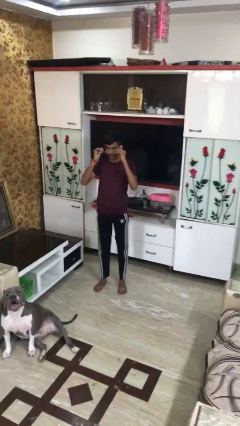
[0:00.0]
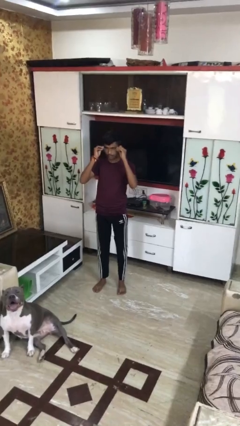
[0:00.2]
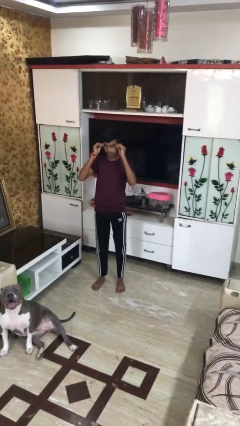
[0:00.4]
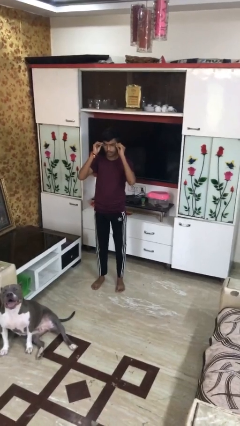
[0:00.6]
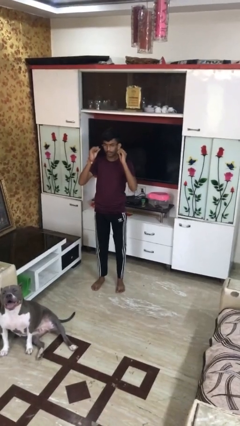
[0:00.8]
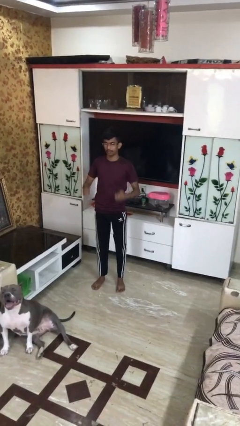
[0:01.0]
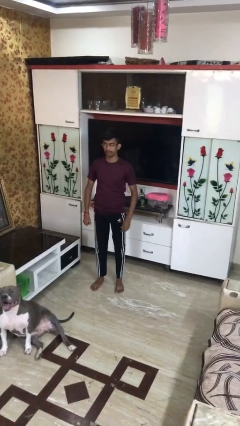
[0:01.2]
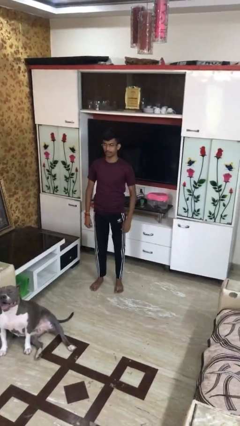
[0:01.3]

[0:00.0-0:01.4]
person puts on glasses

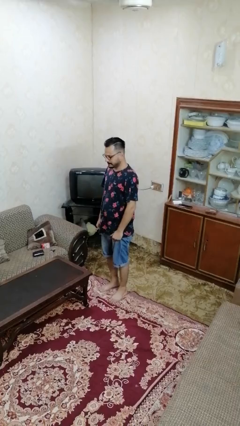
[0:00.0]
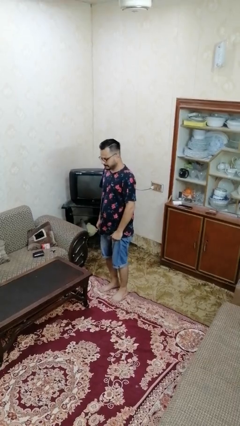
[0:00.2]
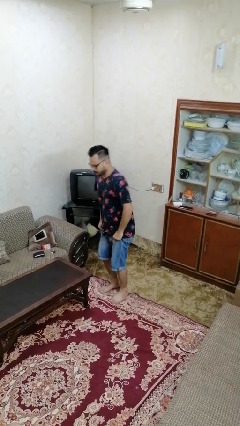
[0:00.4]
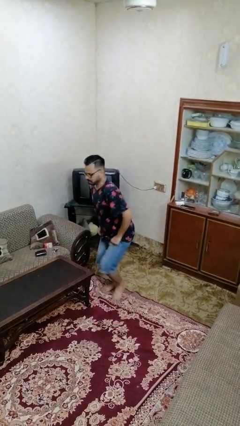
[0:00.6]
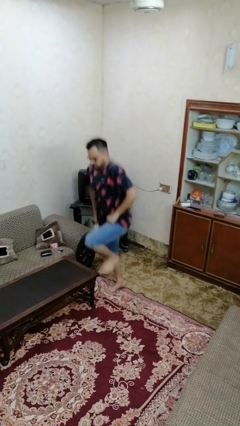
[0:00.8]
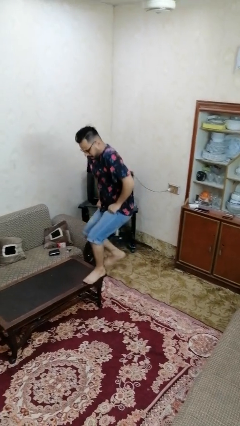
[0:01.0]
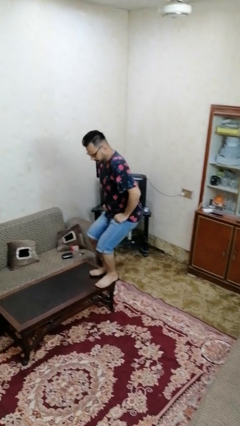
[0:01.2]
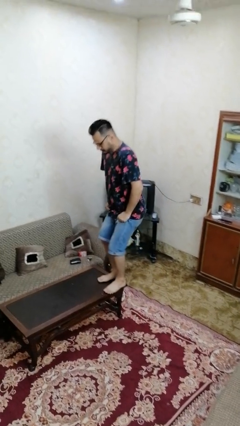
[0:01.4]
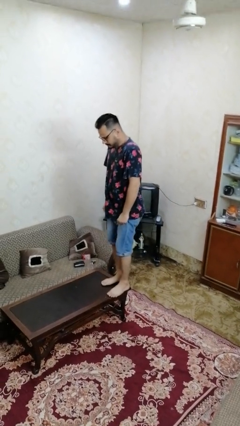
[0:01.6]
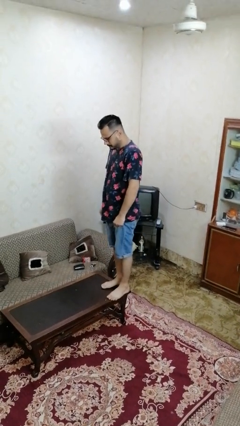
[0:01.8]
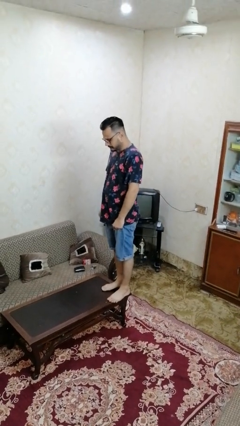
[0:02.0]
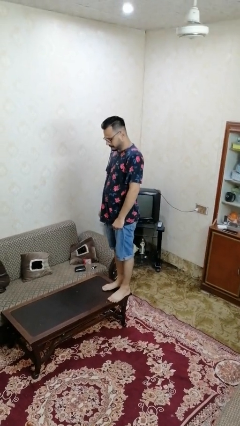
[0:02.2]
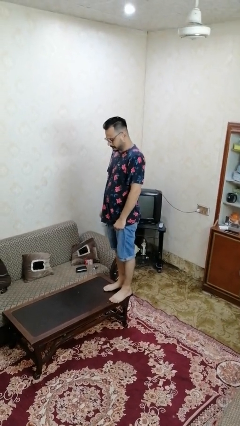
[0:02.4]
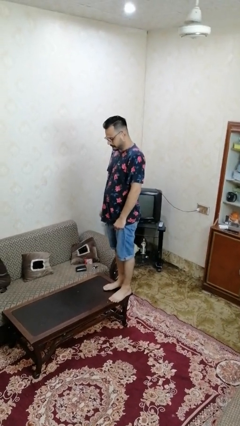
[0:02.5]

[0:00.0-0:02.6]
person climbs on table

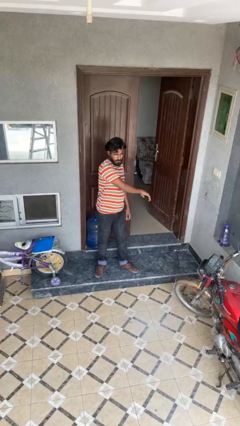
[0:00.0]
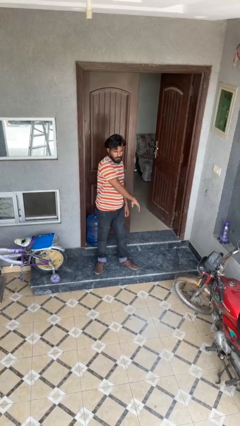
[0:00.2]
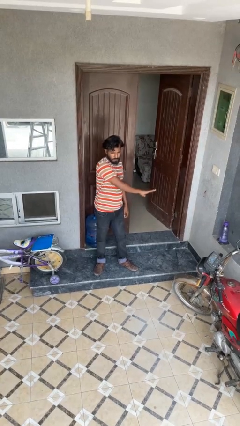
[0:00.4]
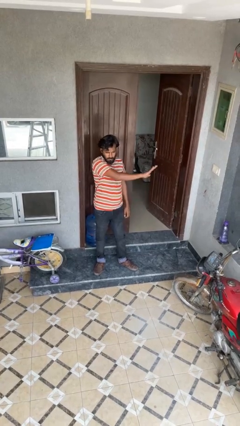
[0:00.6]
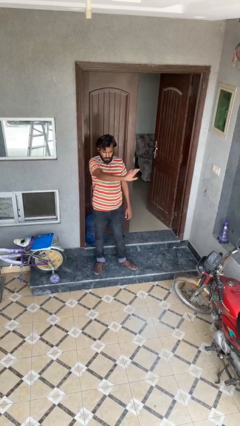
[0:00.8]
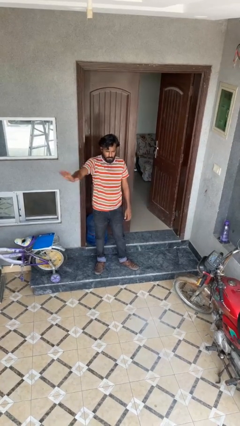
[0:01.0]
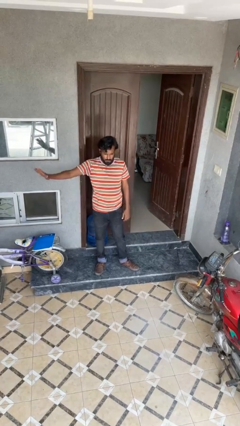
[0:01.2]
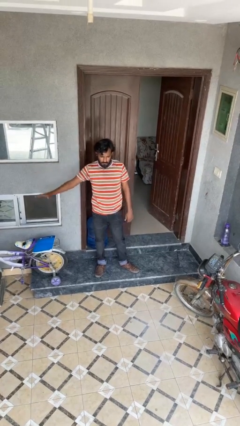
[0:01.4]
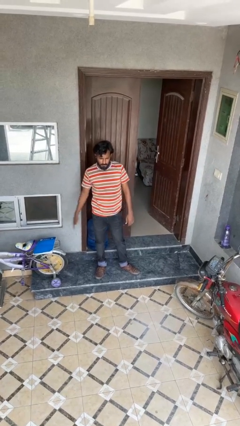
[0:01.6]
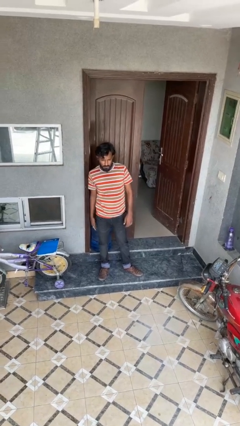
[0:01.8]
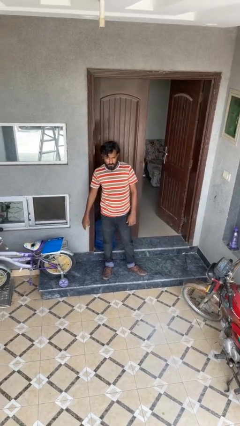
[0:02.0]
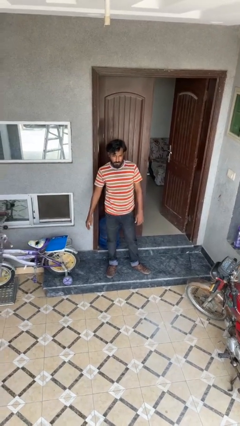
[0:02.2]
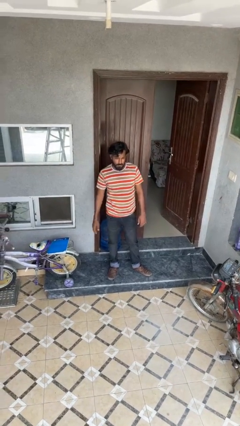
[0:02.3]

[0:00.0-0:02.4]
person gestures swipe right

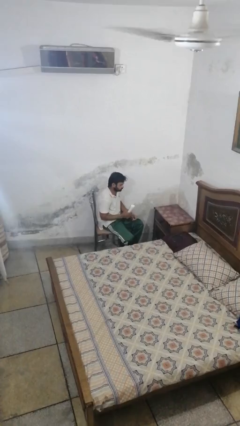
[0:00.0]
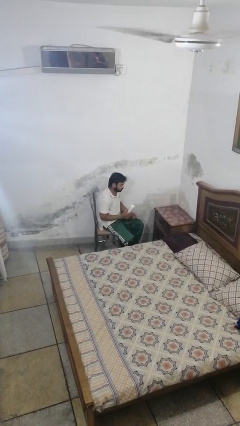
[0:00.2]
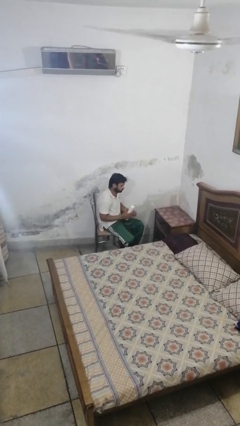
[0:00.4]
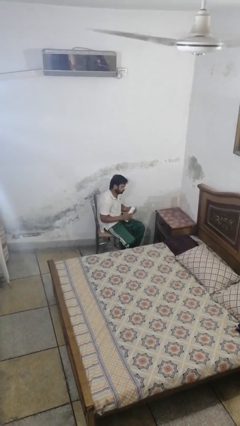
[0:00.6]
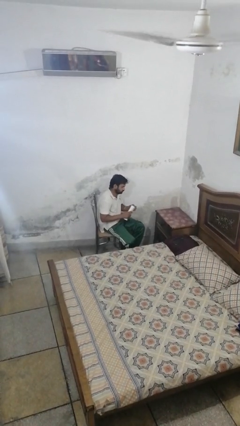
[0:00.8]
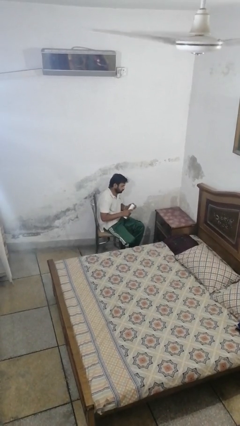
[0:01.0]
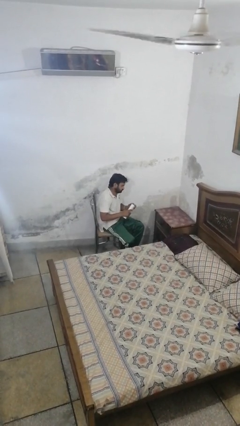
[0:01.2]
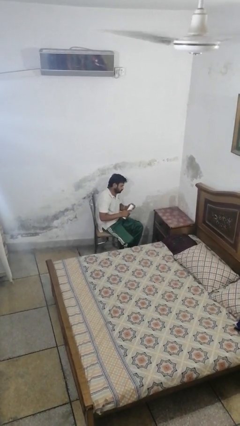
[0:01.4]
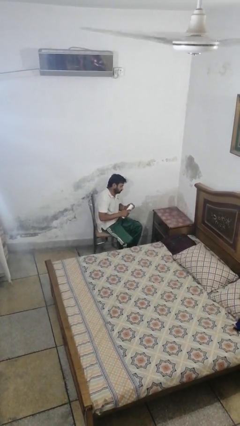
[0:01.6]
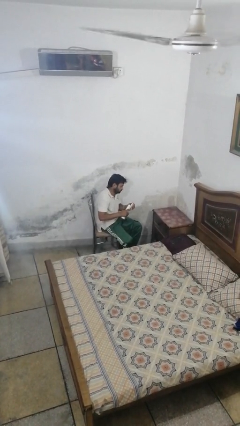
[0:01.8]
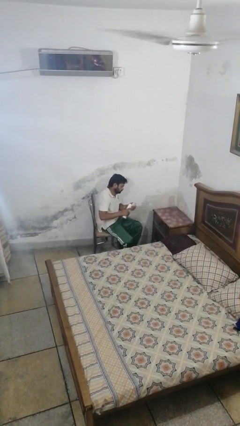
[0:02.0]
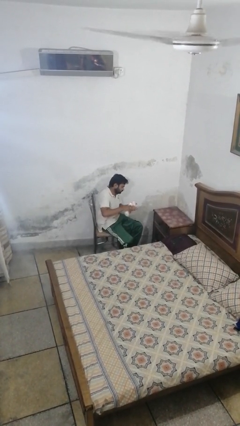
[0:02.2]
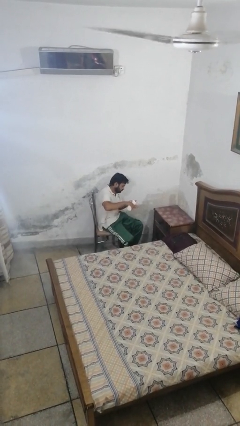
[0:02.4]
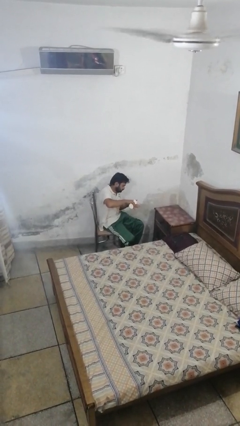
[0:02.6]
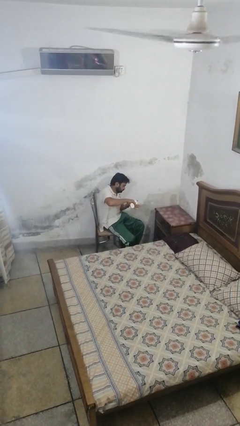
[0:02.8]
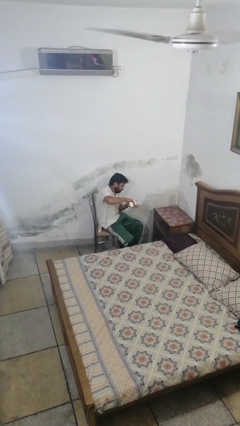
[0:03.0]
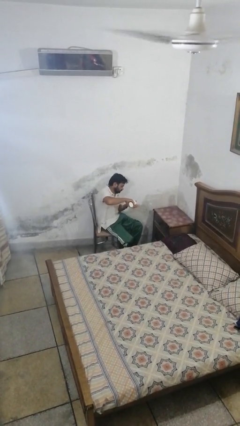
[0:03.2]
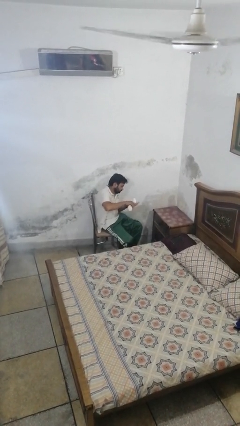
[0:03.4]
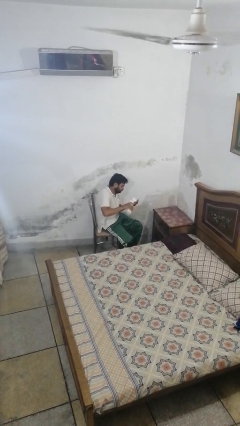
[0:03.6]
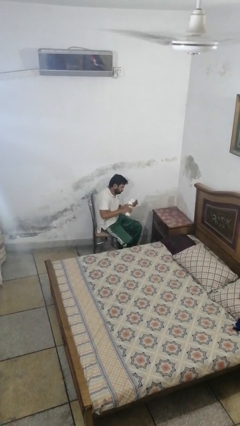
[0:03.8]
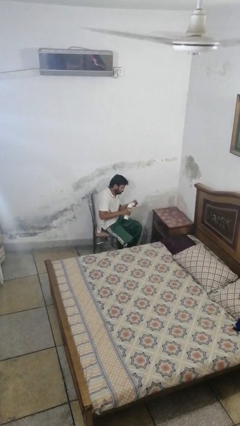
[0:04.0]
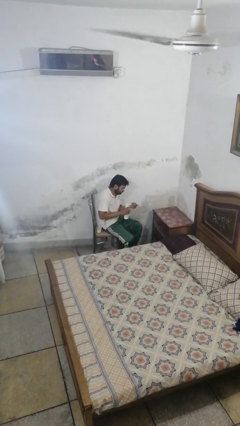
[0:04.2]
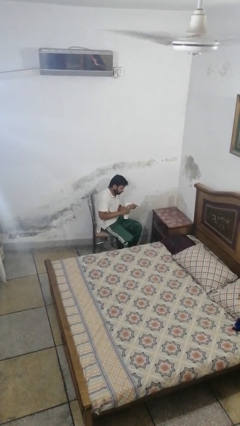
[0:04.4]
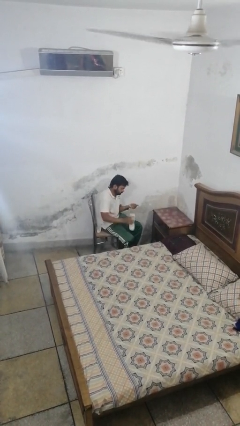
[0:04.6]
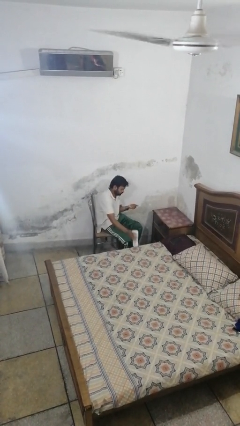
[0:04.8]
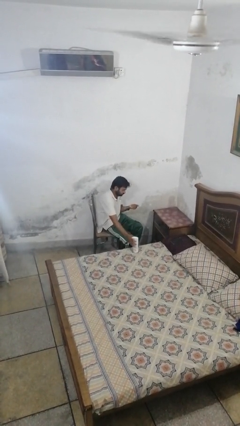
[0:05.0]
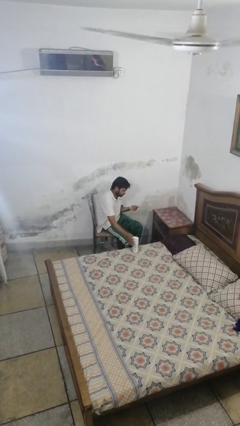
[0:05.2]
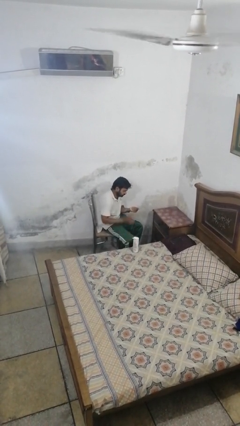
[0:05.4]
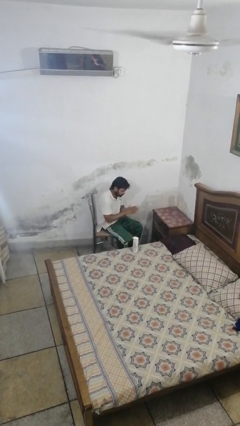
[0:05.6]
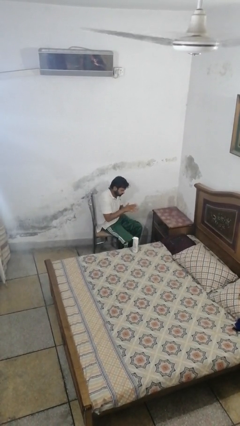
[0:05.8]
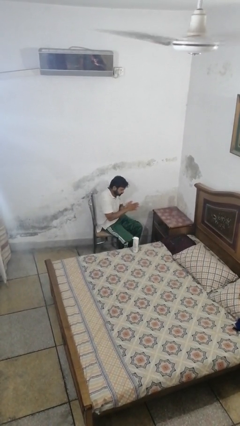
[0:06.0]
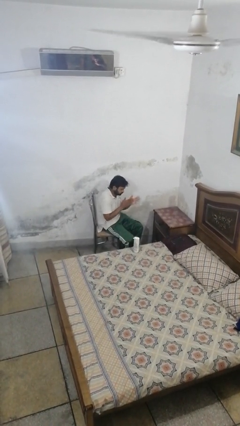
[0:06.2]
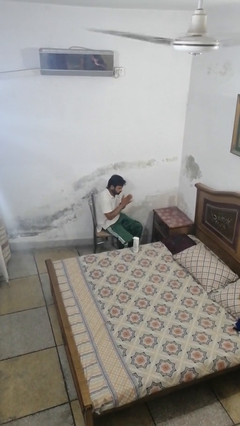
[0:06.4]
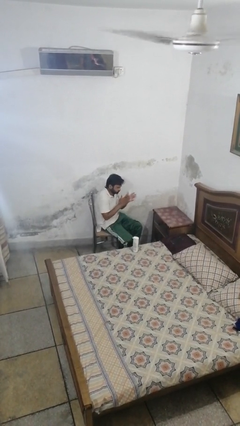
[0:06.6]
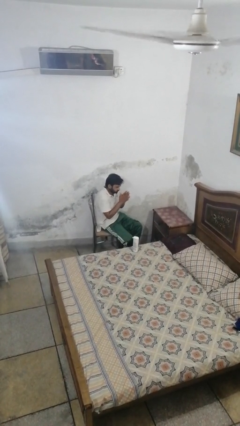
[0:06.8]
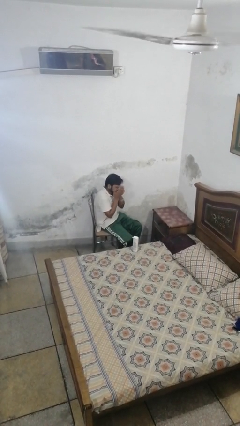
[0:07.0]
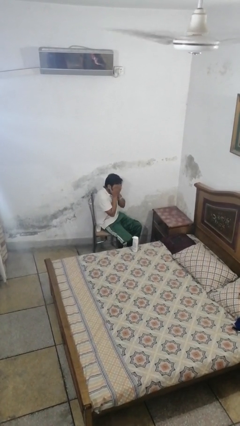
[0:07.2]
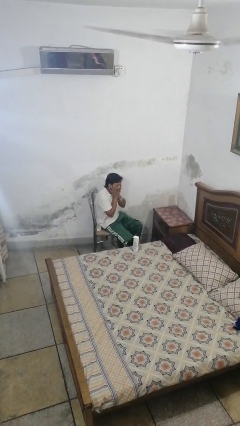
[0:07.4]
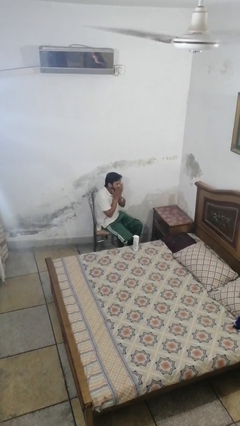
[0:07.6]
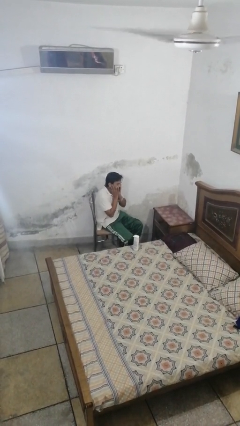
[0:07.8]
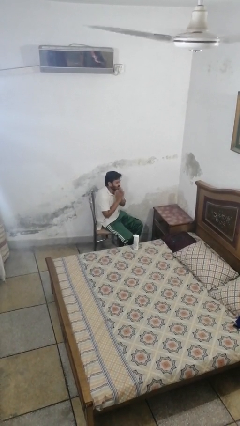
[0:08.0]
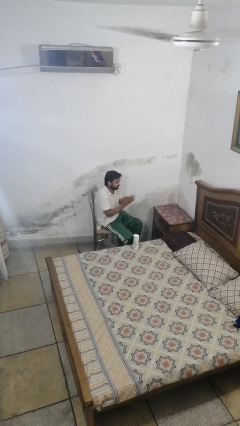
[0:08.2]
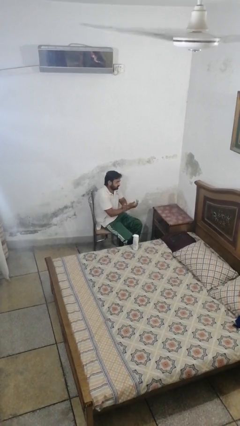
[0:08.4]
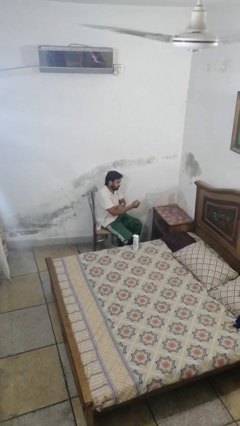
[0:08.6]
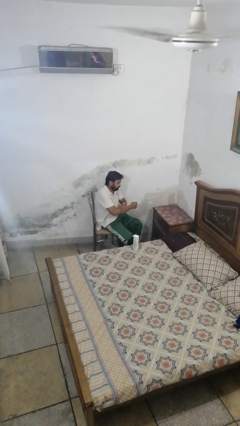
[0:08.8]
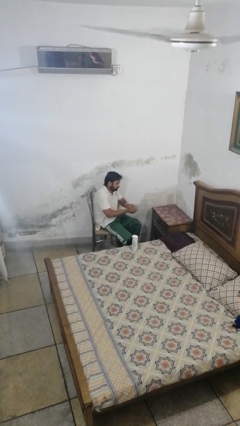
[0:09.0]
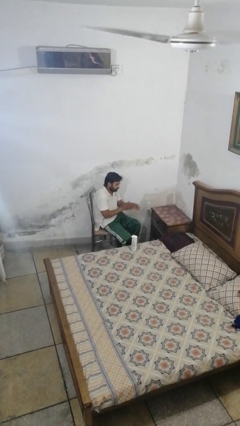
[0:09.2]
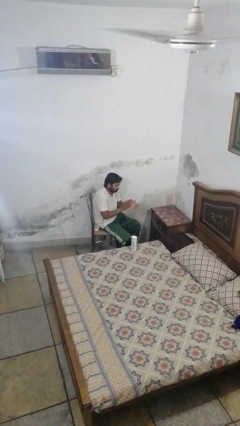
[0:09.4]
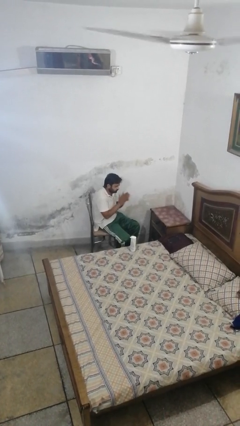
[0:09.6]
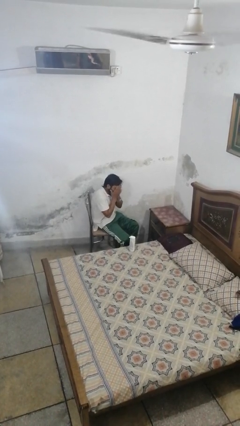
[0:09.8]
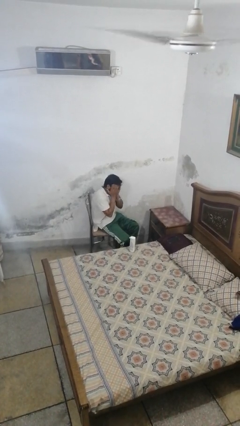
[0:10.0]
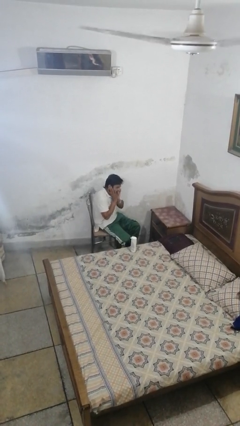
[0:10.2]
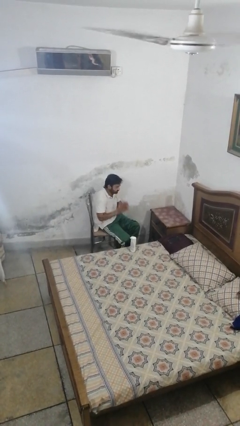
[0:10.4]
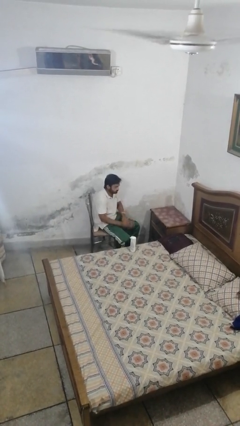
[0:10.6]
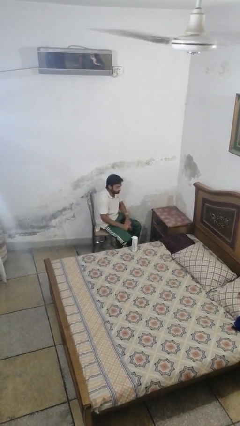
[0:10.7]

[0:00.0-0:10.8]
person applies facial moisturizer

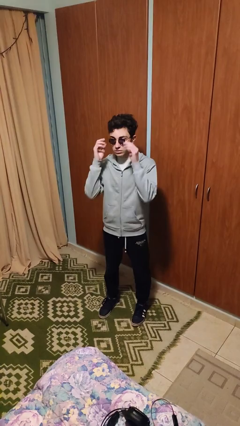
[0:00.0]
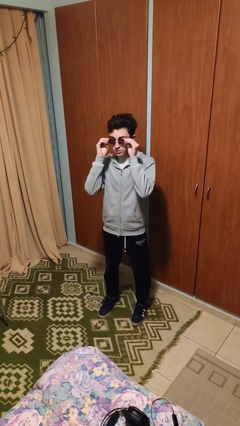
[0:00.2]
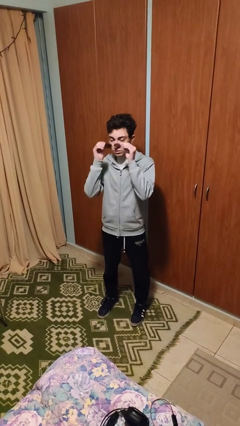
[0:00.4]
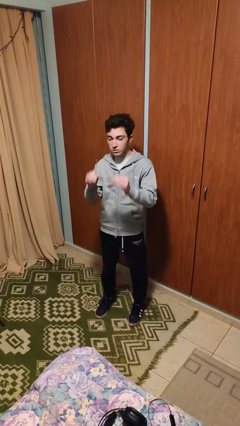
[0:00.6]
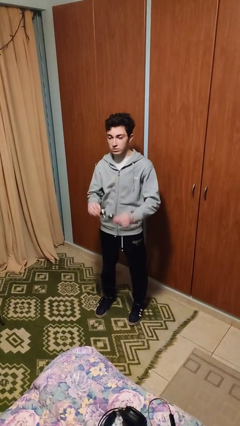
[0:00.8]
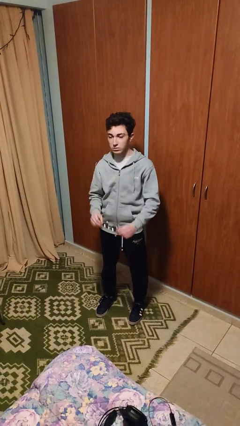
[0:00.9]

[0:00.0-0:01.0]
person takes off glasses
